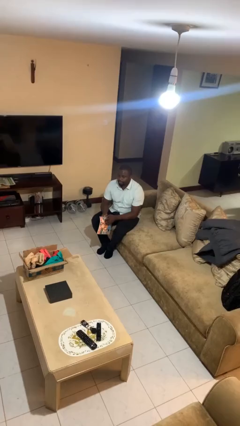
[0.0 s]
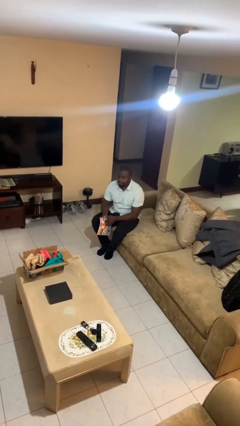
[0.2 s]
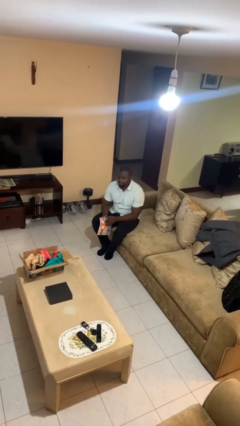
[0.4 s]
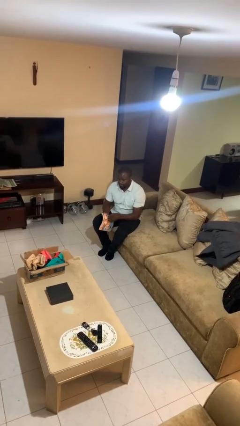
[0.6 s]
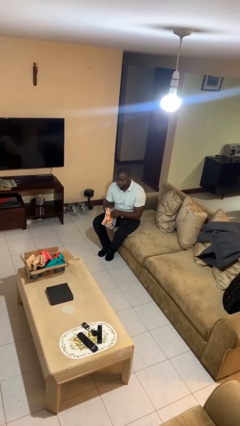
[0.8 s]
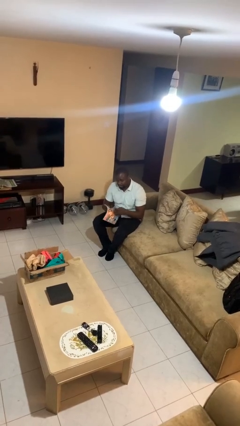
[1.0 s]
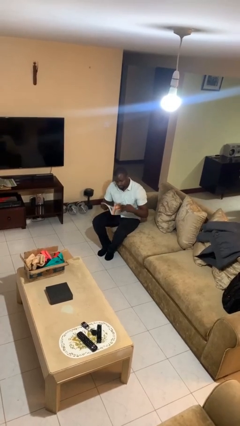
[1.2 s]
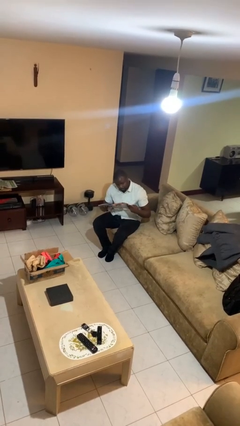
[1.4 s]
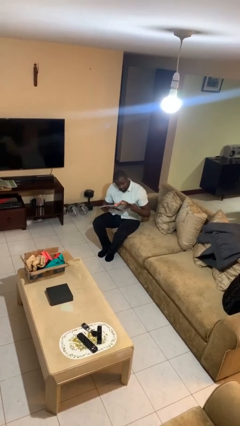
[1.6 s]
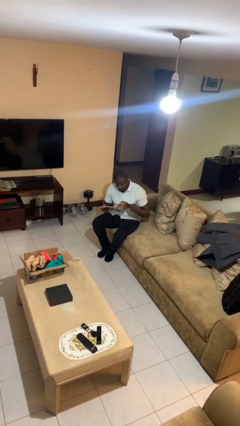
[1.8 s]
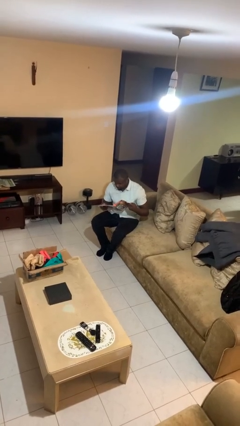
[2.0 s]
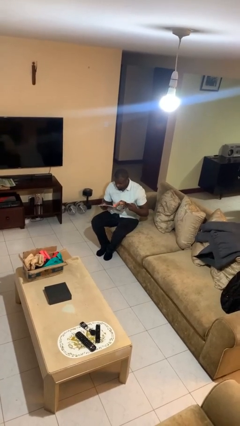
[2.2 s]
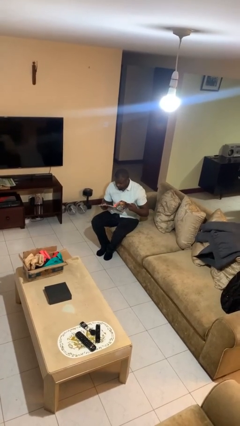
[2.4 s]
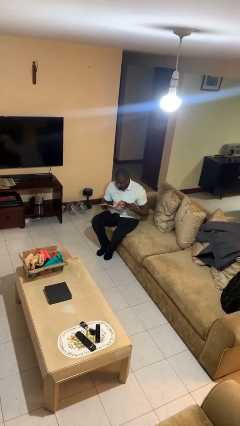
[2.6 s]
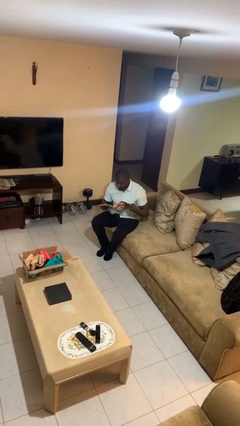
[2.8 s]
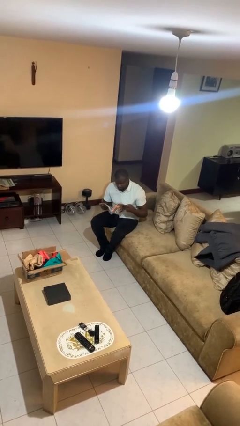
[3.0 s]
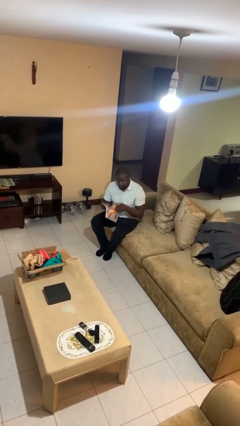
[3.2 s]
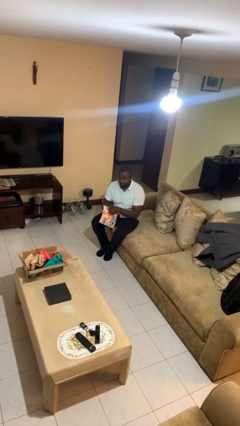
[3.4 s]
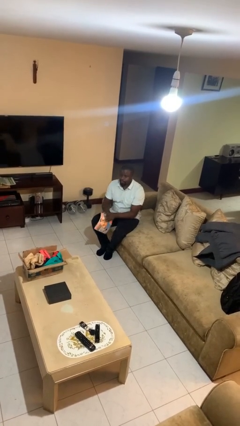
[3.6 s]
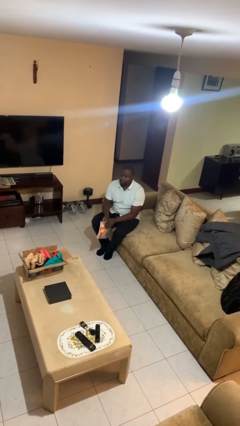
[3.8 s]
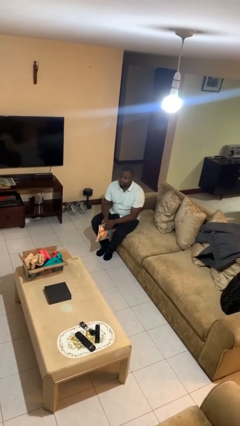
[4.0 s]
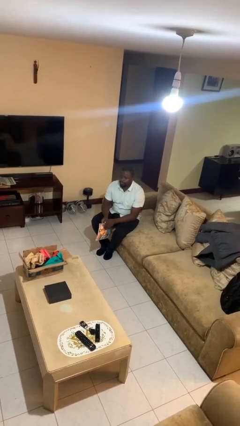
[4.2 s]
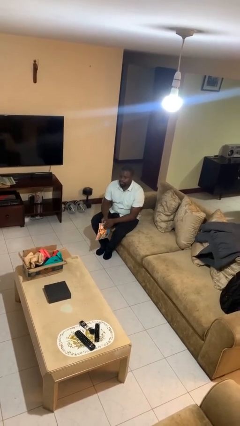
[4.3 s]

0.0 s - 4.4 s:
person reads magazine

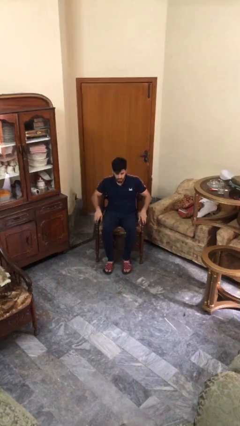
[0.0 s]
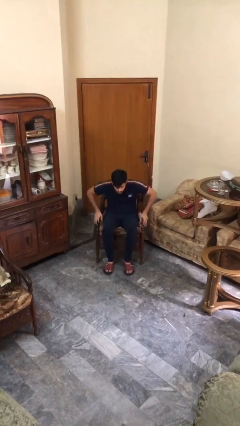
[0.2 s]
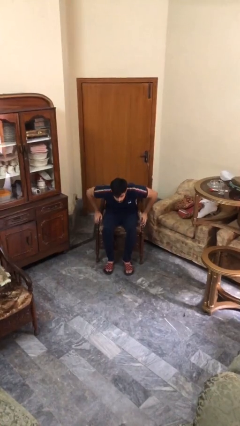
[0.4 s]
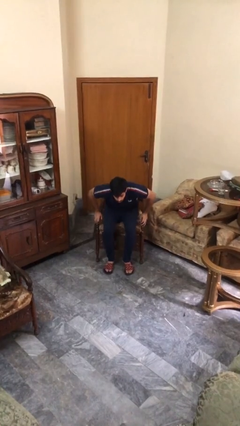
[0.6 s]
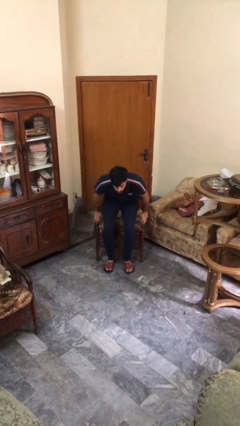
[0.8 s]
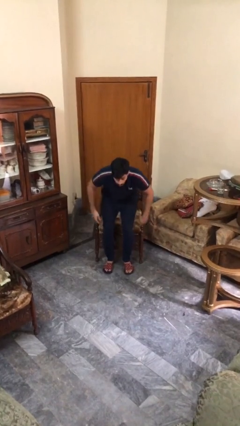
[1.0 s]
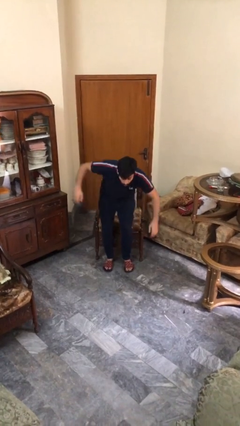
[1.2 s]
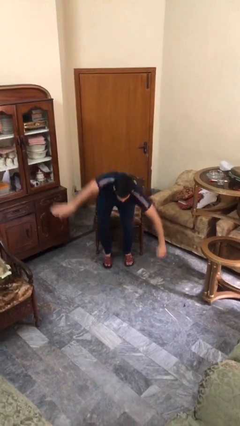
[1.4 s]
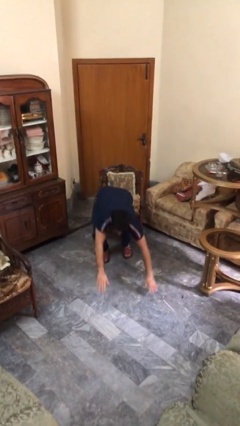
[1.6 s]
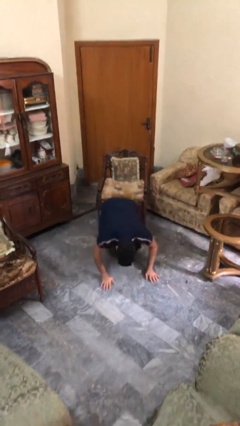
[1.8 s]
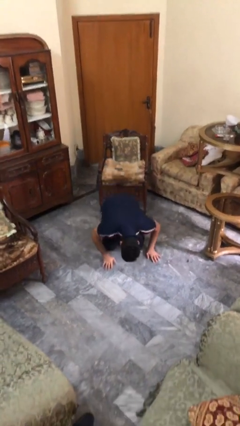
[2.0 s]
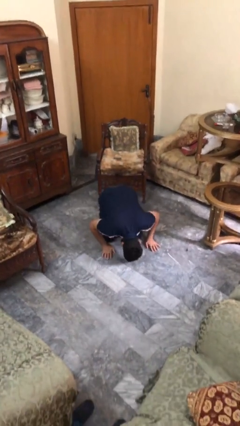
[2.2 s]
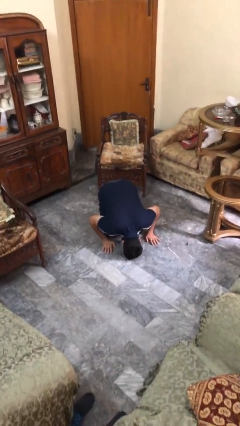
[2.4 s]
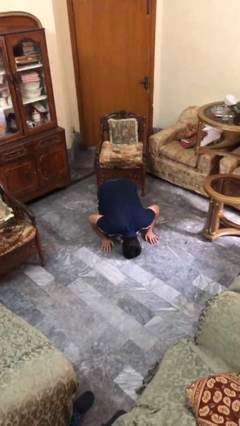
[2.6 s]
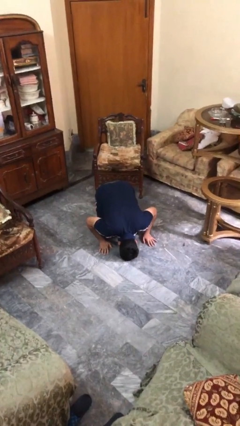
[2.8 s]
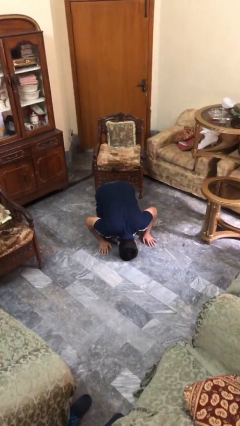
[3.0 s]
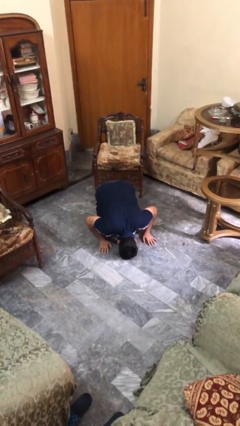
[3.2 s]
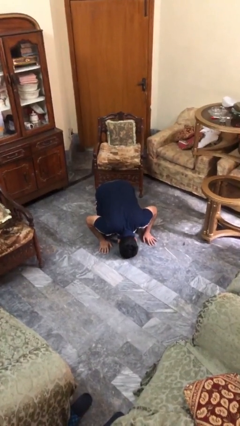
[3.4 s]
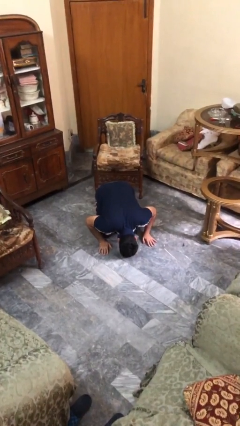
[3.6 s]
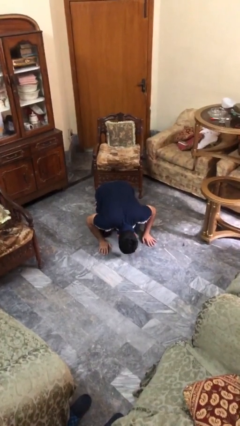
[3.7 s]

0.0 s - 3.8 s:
person falls from chair

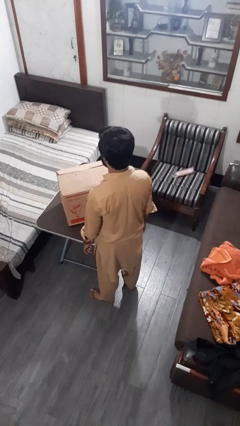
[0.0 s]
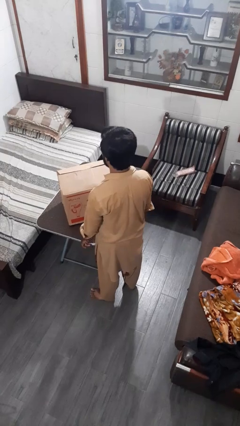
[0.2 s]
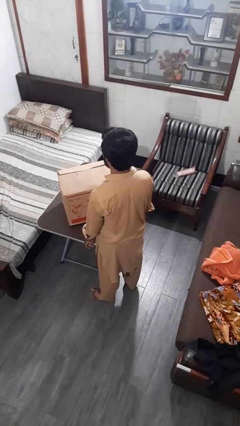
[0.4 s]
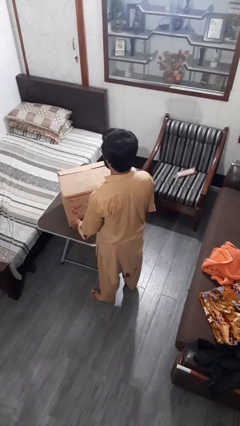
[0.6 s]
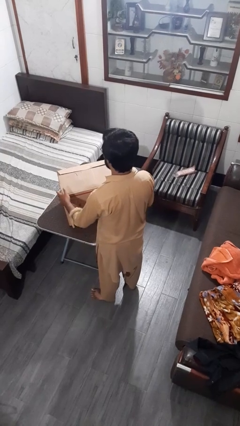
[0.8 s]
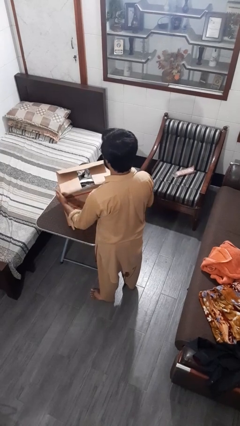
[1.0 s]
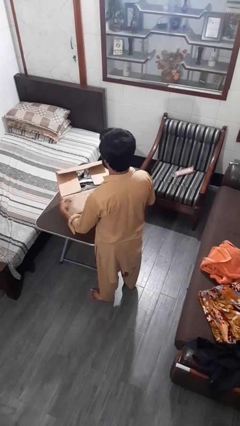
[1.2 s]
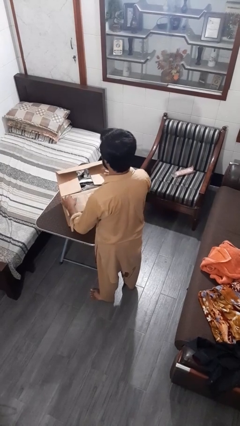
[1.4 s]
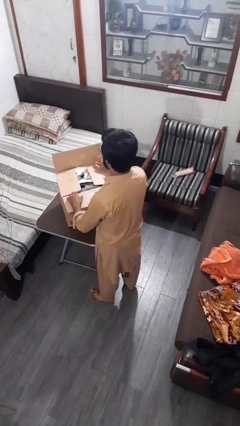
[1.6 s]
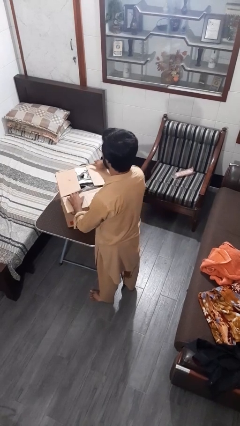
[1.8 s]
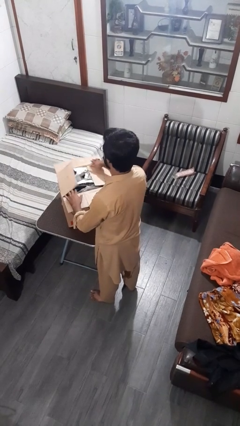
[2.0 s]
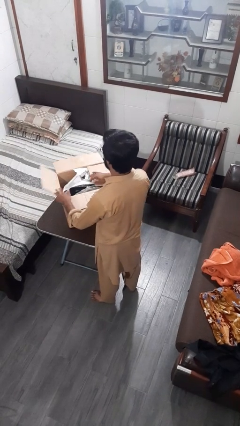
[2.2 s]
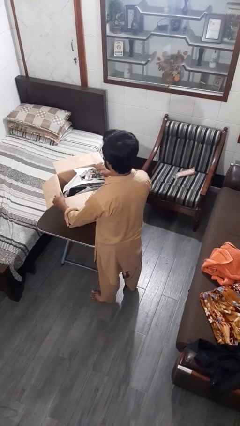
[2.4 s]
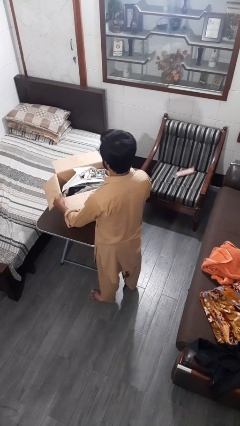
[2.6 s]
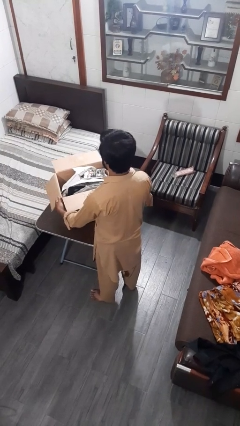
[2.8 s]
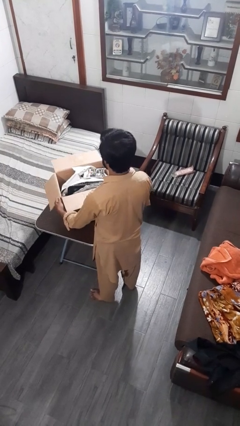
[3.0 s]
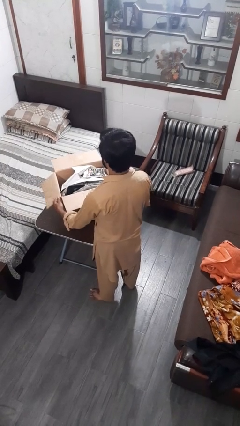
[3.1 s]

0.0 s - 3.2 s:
person opens box

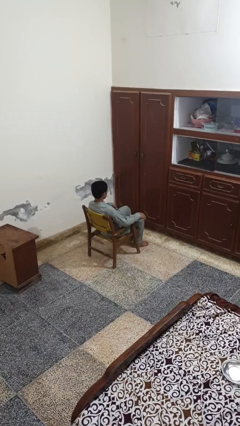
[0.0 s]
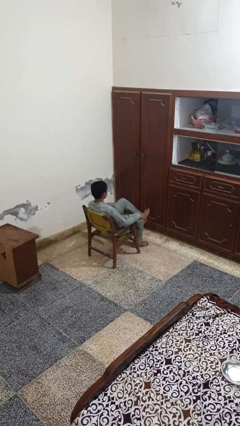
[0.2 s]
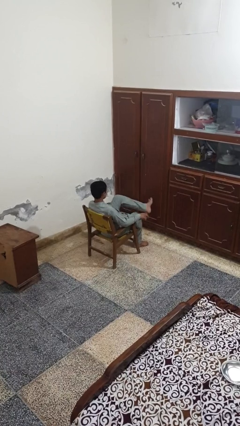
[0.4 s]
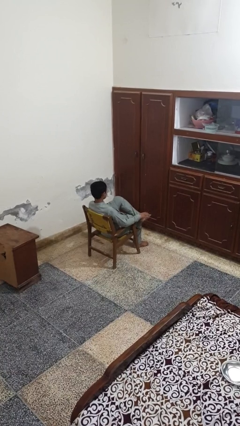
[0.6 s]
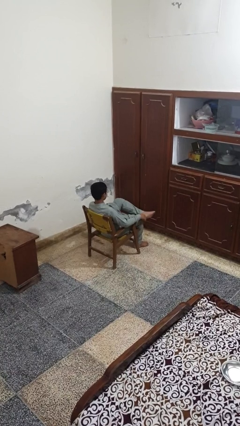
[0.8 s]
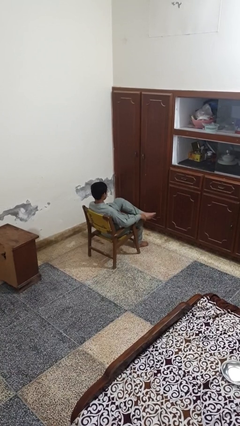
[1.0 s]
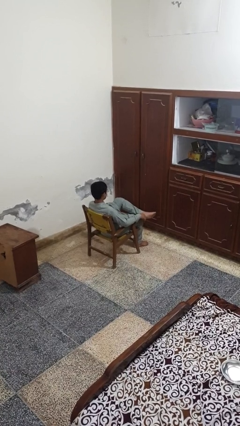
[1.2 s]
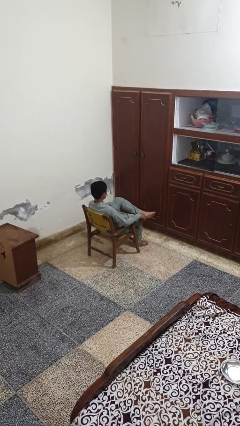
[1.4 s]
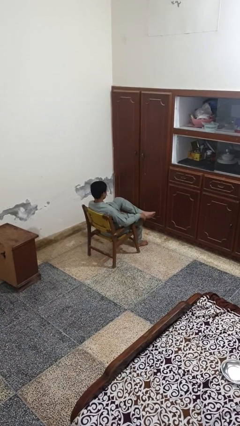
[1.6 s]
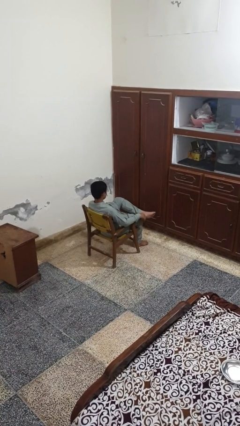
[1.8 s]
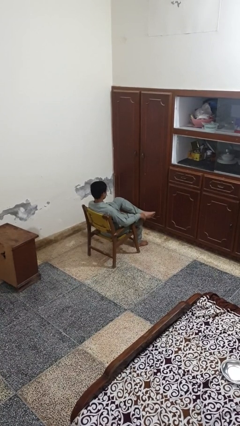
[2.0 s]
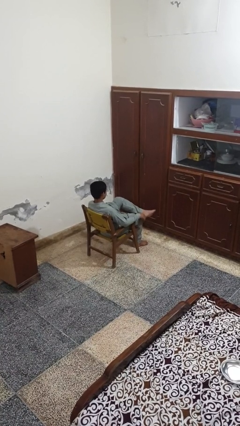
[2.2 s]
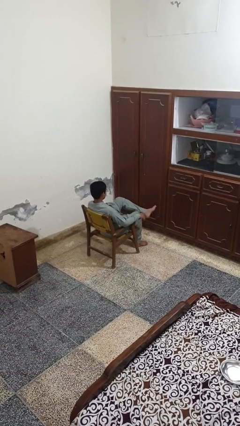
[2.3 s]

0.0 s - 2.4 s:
person crosses legs

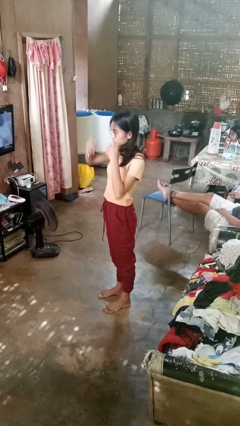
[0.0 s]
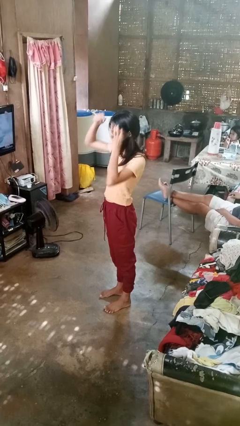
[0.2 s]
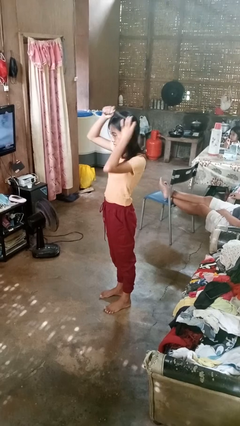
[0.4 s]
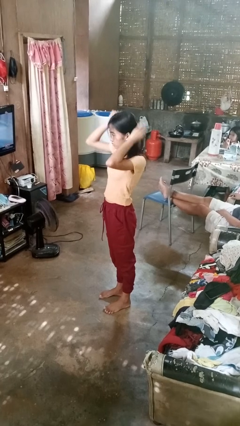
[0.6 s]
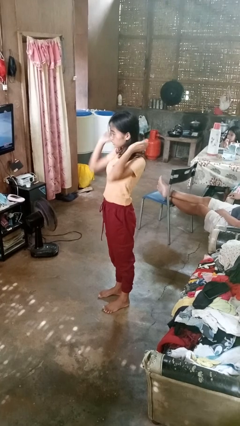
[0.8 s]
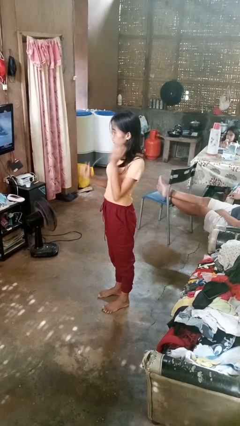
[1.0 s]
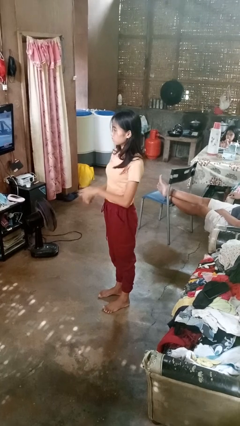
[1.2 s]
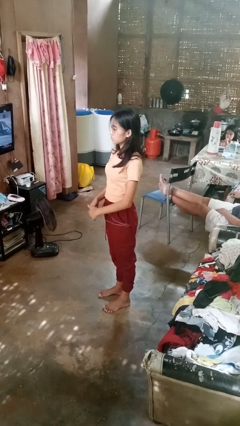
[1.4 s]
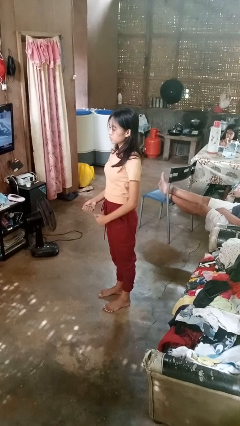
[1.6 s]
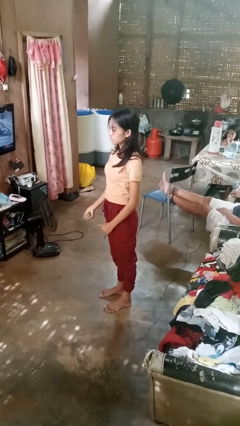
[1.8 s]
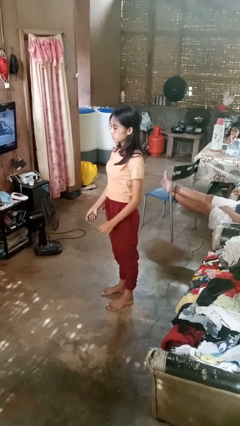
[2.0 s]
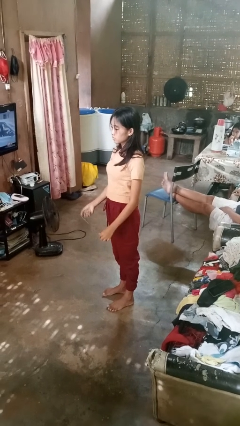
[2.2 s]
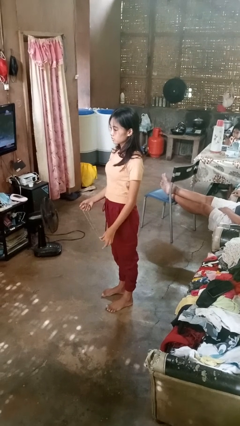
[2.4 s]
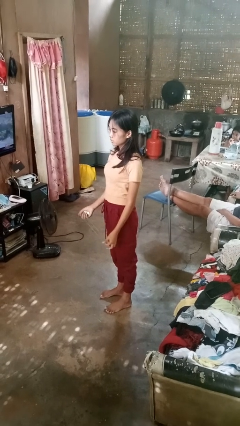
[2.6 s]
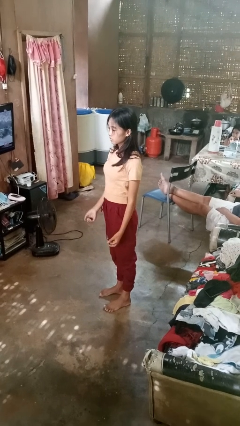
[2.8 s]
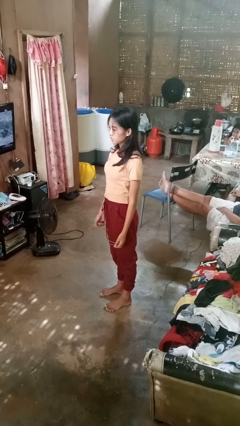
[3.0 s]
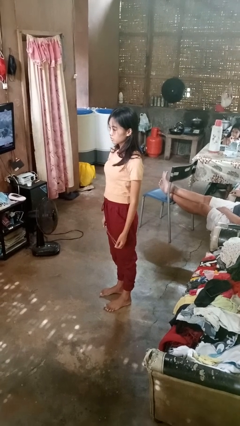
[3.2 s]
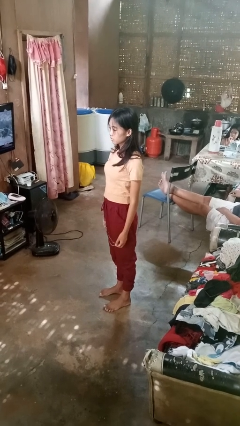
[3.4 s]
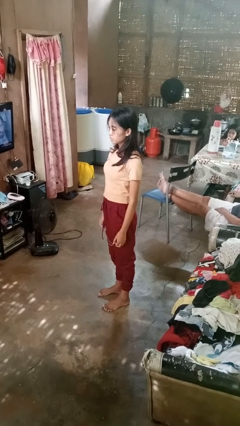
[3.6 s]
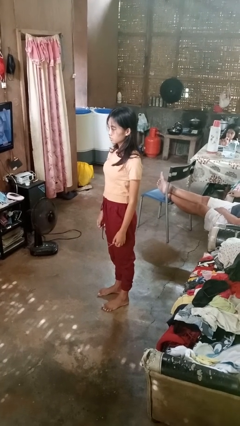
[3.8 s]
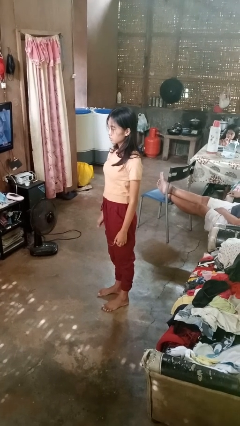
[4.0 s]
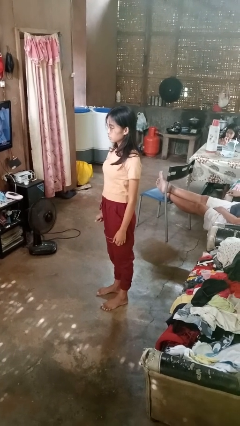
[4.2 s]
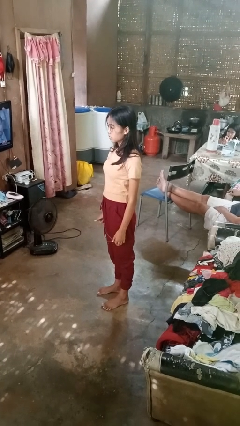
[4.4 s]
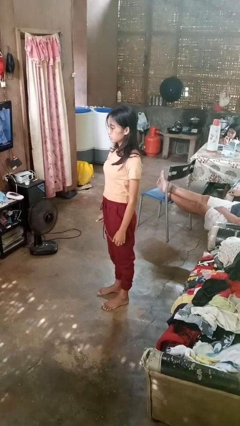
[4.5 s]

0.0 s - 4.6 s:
person puts on belt
